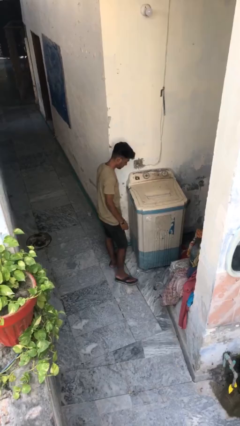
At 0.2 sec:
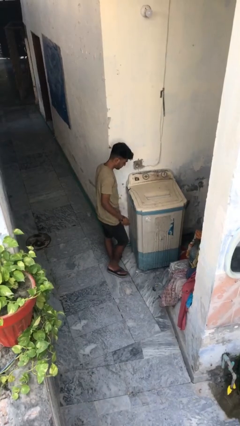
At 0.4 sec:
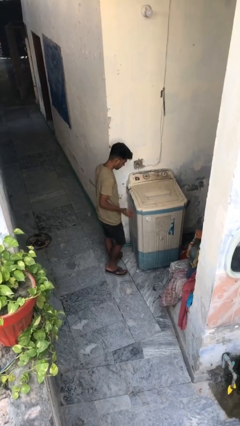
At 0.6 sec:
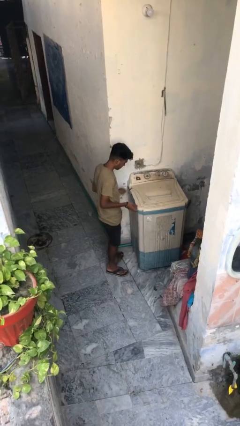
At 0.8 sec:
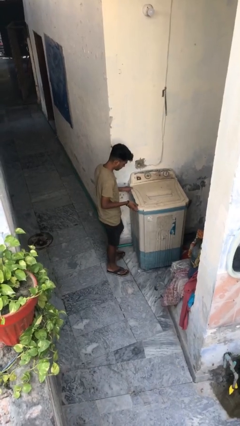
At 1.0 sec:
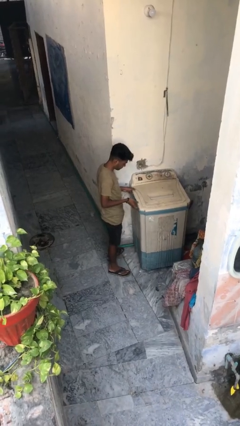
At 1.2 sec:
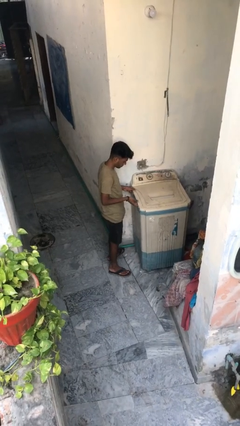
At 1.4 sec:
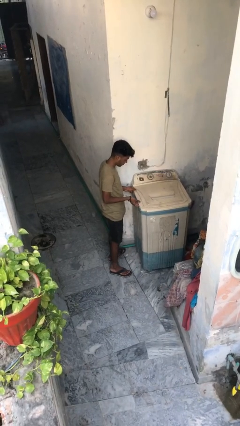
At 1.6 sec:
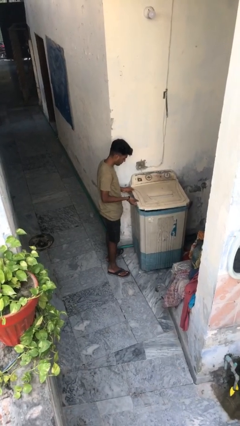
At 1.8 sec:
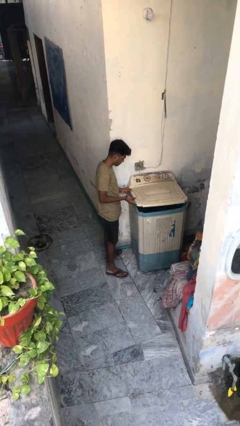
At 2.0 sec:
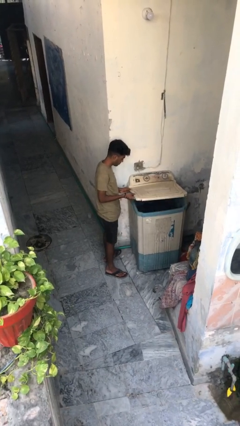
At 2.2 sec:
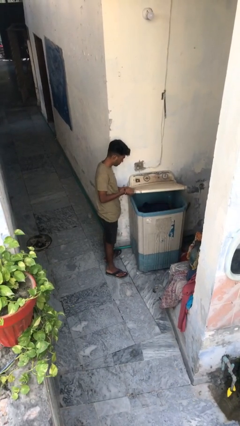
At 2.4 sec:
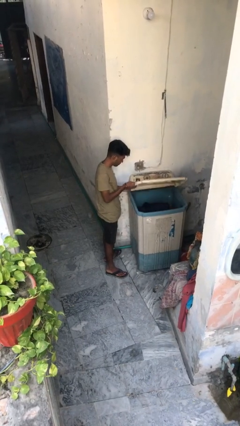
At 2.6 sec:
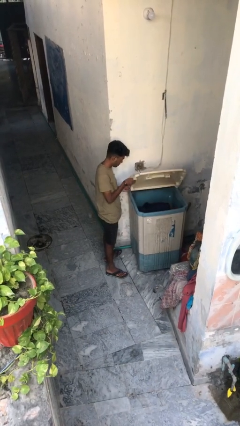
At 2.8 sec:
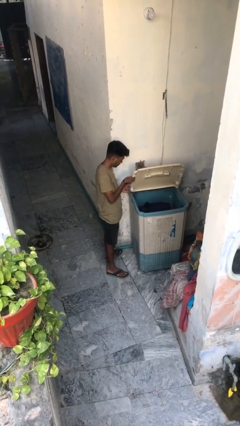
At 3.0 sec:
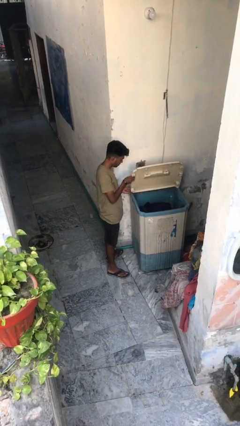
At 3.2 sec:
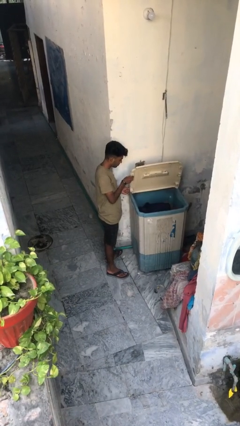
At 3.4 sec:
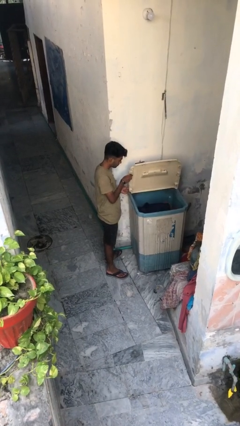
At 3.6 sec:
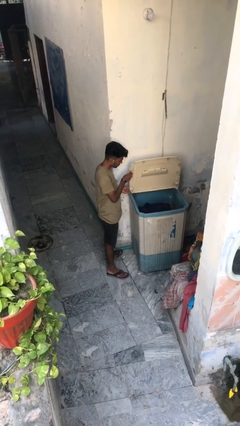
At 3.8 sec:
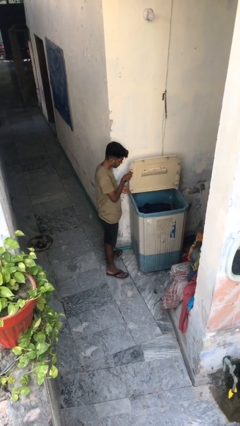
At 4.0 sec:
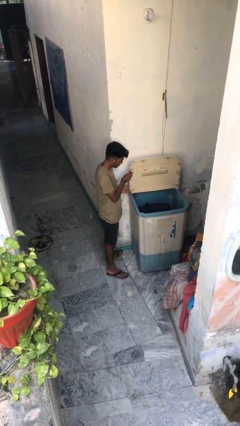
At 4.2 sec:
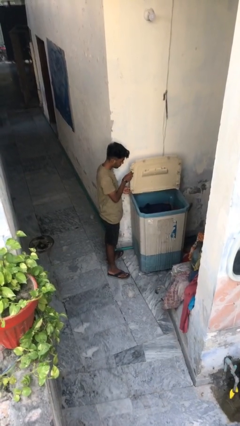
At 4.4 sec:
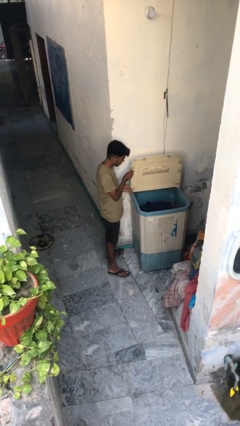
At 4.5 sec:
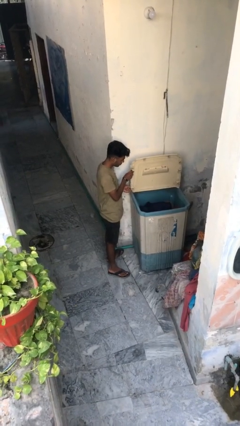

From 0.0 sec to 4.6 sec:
person opens clothes washer

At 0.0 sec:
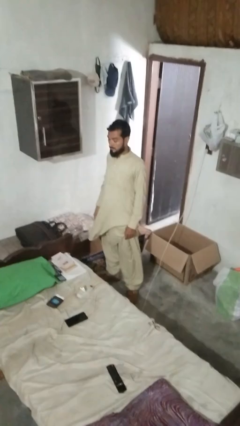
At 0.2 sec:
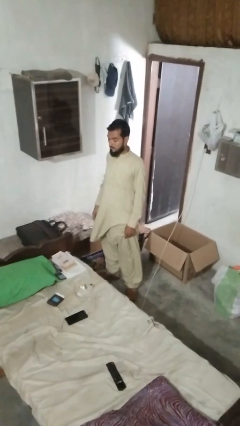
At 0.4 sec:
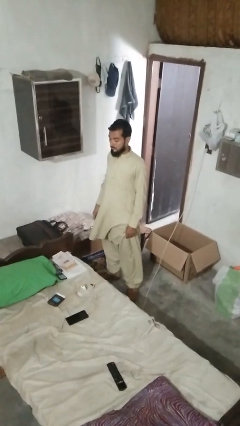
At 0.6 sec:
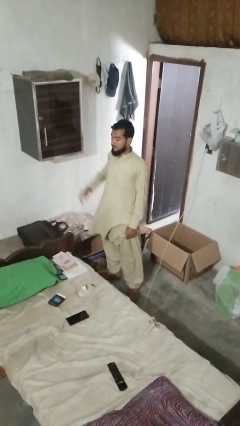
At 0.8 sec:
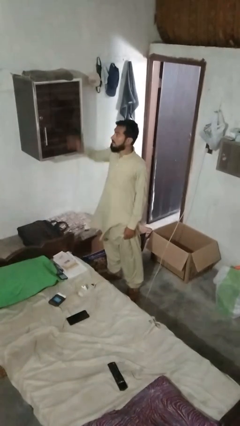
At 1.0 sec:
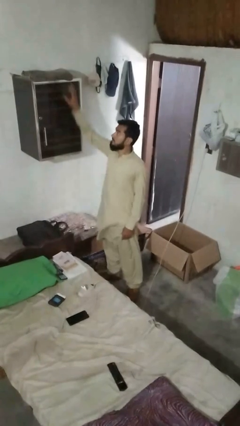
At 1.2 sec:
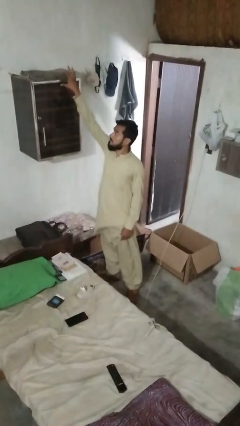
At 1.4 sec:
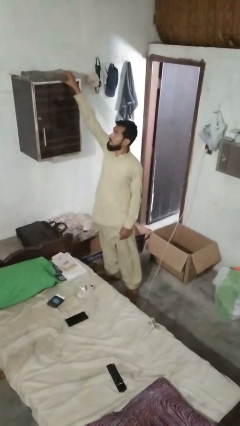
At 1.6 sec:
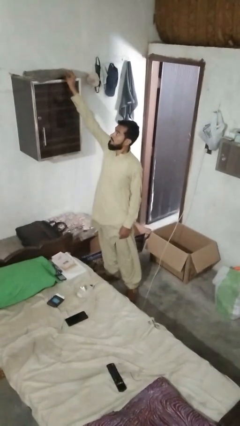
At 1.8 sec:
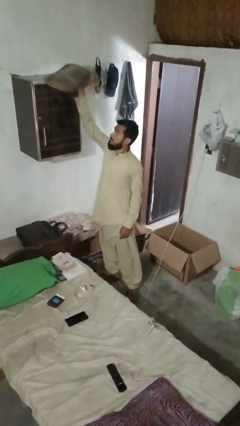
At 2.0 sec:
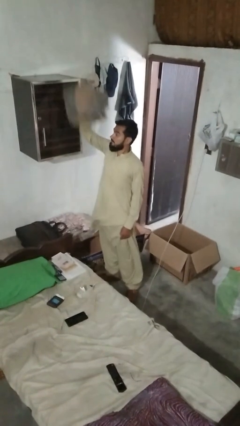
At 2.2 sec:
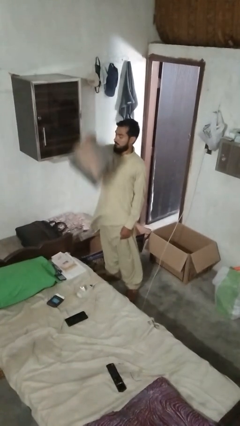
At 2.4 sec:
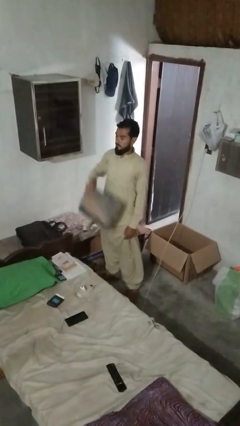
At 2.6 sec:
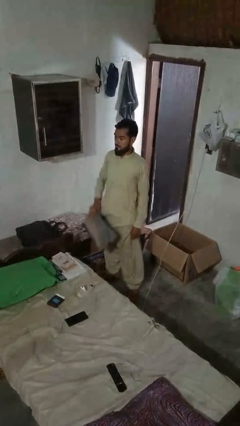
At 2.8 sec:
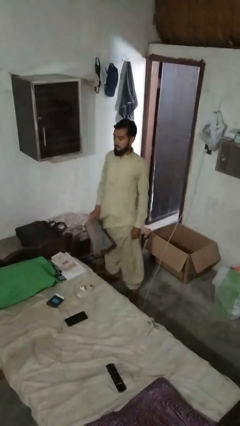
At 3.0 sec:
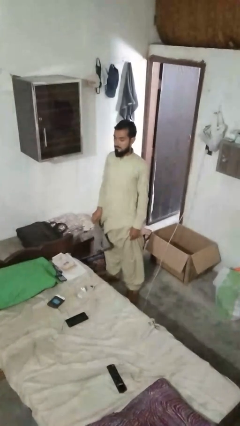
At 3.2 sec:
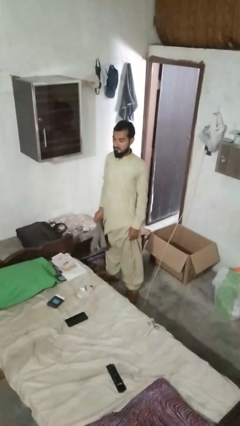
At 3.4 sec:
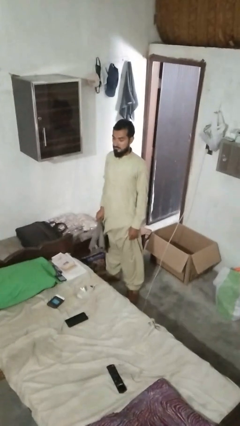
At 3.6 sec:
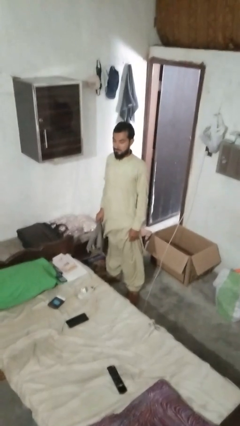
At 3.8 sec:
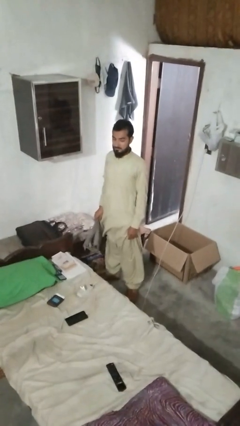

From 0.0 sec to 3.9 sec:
person puts down object on shelf

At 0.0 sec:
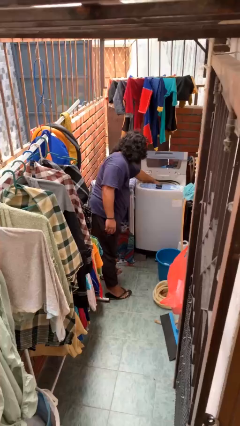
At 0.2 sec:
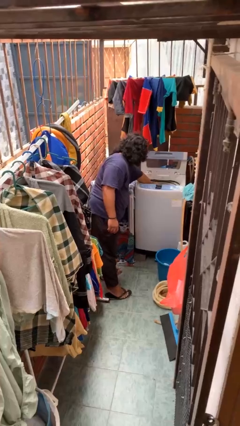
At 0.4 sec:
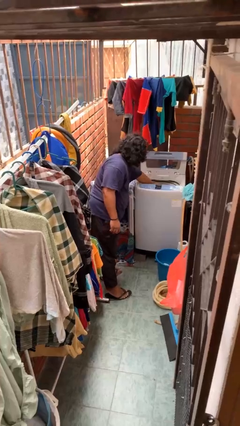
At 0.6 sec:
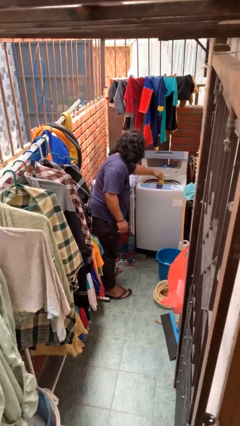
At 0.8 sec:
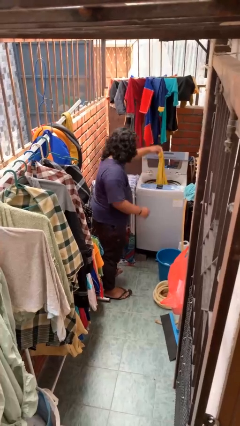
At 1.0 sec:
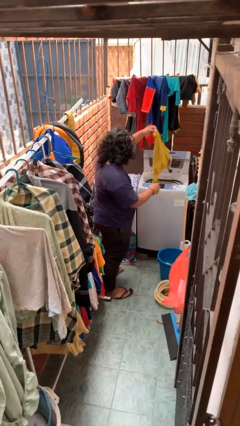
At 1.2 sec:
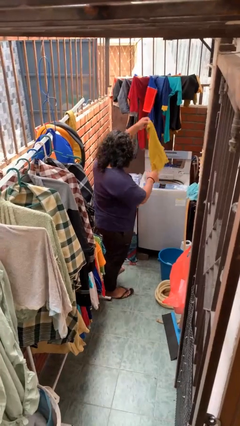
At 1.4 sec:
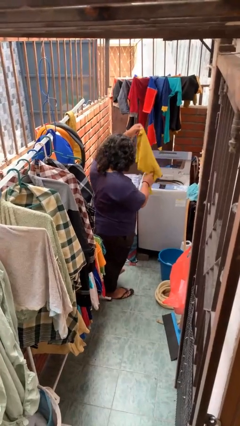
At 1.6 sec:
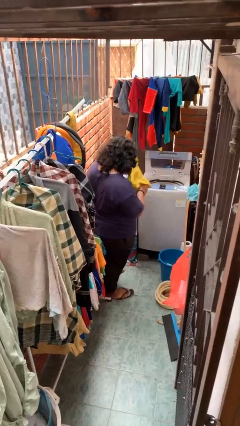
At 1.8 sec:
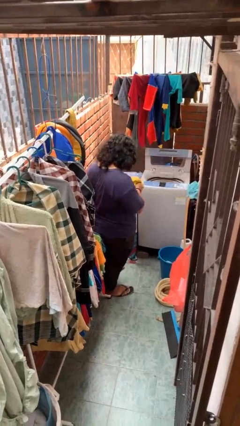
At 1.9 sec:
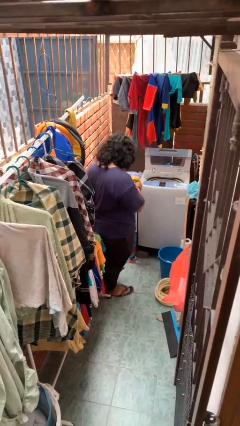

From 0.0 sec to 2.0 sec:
person unloads clotheswasher

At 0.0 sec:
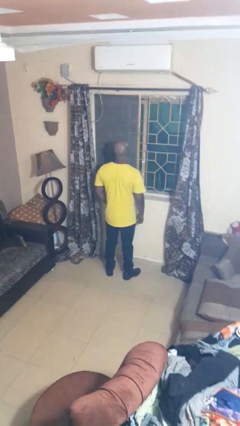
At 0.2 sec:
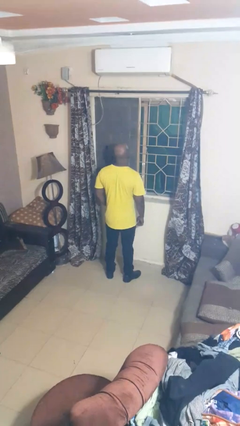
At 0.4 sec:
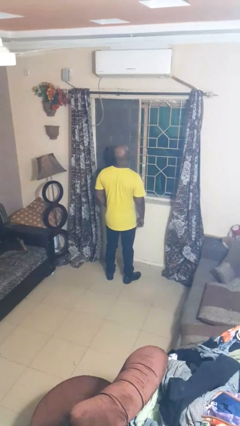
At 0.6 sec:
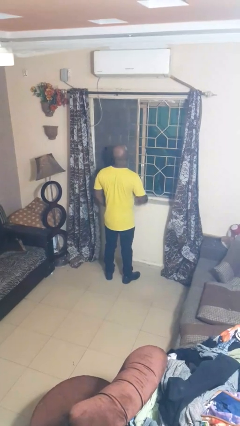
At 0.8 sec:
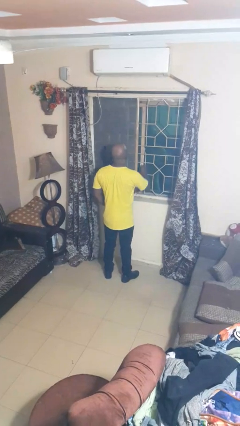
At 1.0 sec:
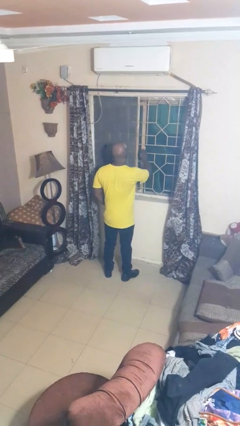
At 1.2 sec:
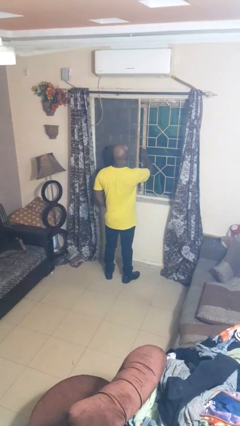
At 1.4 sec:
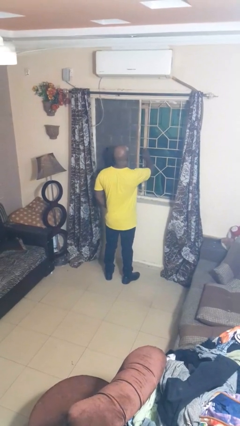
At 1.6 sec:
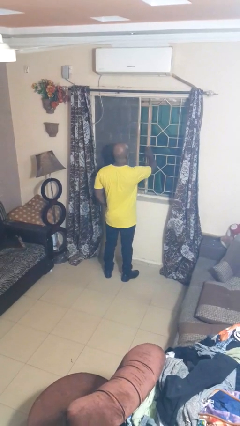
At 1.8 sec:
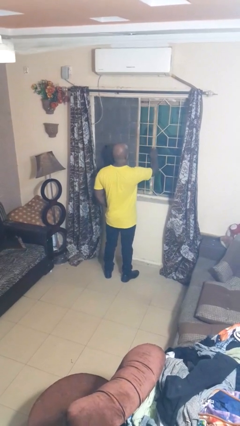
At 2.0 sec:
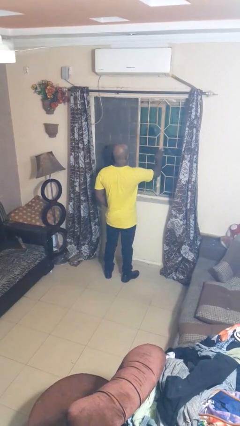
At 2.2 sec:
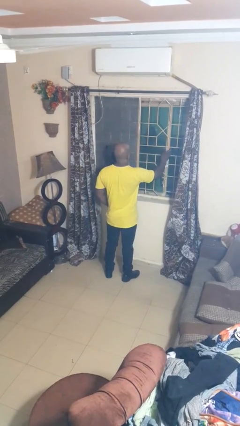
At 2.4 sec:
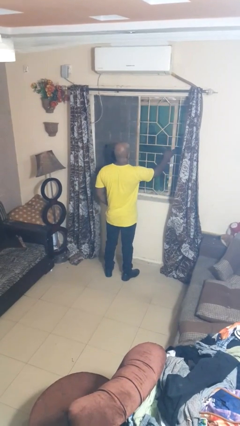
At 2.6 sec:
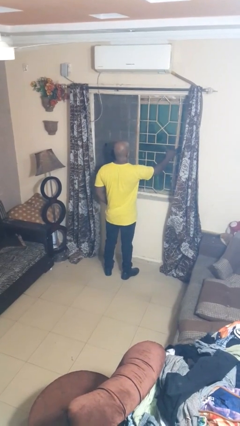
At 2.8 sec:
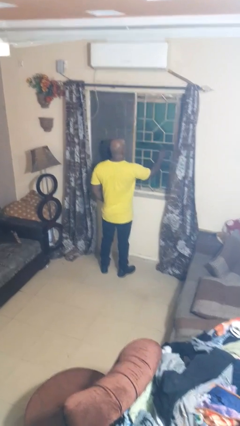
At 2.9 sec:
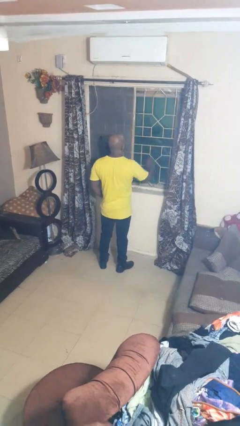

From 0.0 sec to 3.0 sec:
person opens home window

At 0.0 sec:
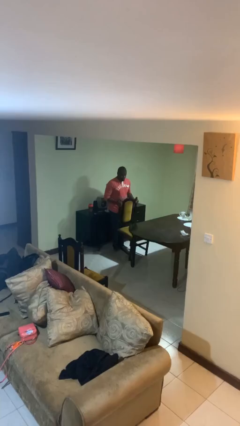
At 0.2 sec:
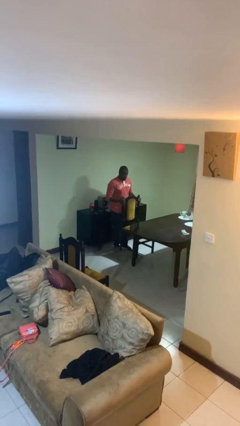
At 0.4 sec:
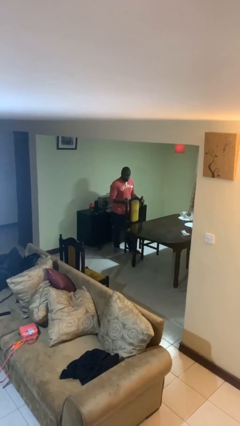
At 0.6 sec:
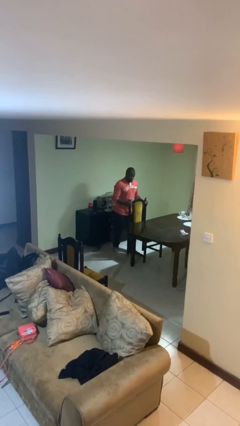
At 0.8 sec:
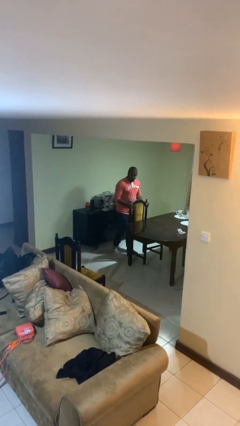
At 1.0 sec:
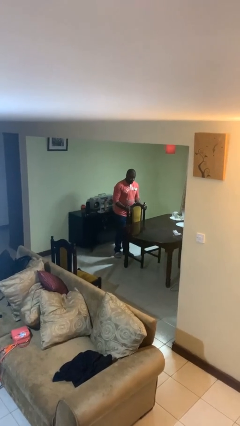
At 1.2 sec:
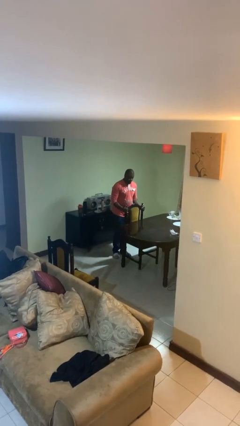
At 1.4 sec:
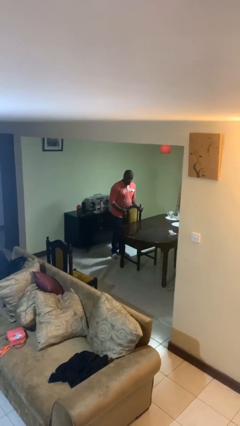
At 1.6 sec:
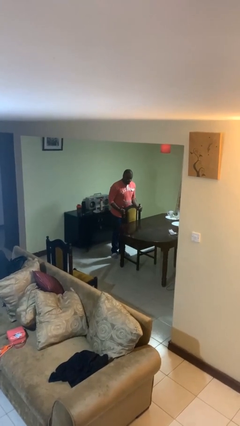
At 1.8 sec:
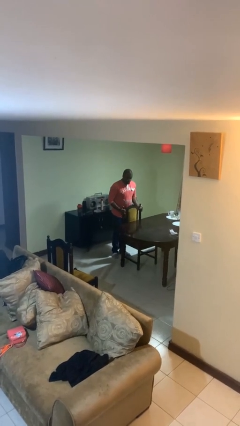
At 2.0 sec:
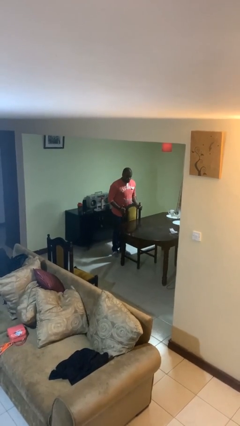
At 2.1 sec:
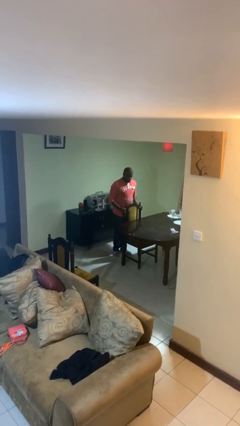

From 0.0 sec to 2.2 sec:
person pushes in chair

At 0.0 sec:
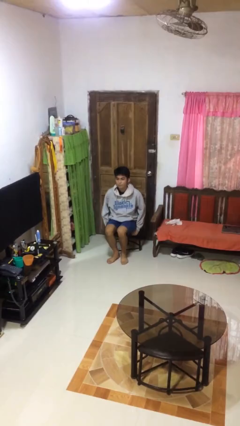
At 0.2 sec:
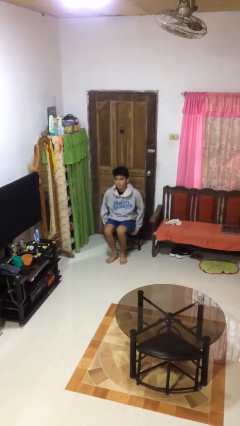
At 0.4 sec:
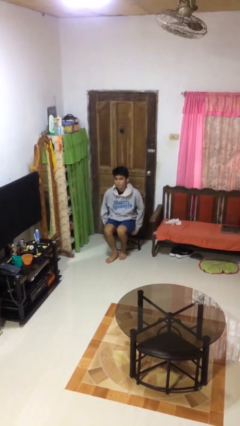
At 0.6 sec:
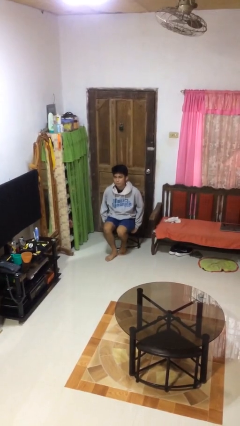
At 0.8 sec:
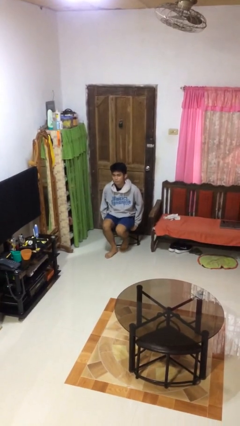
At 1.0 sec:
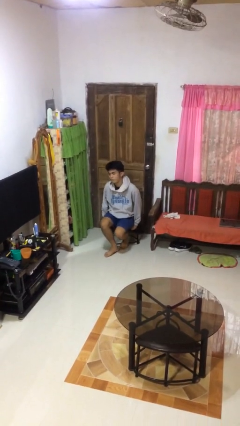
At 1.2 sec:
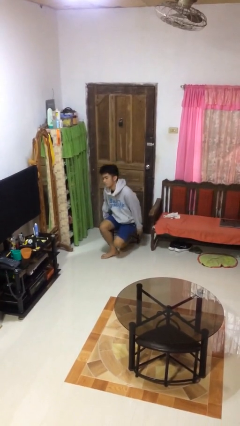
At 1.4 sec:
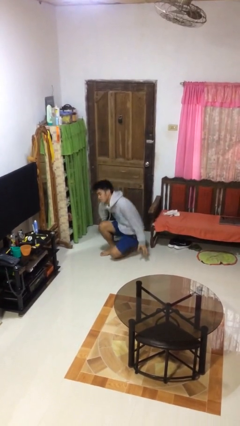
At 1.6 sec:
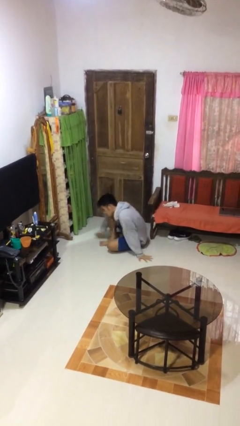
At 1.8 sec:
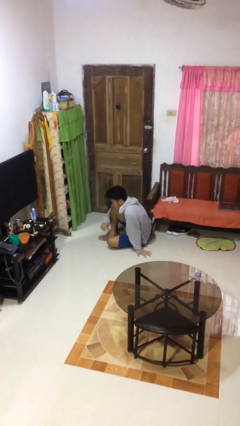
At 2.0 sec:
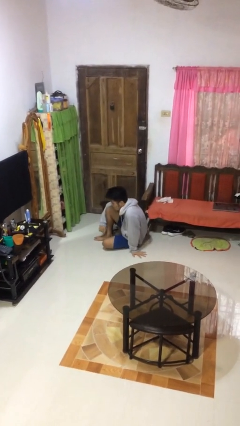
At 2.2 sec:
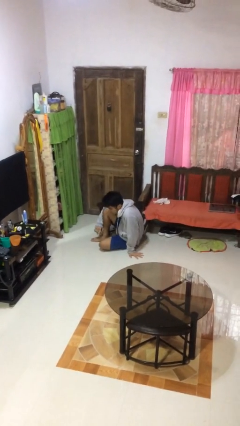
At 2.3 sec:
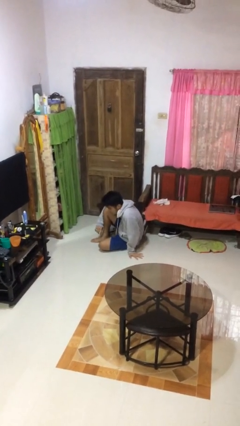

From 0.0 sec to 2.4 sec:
person falls from chair
